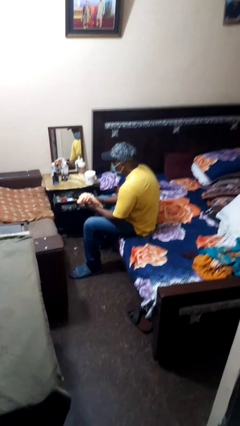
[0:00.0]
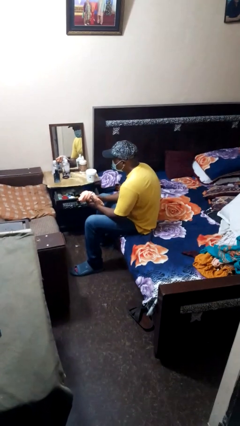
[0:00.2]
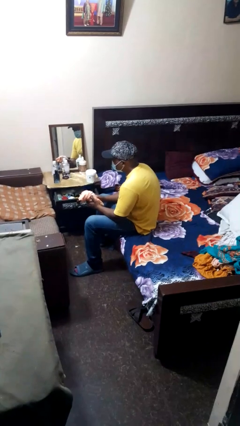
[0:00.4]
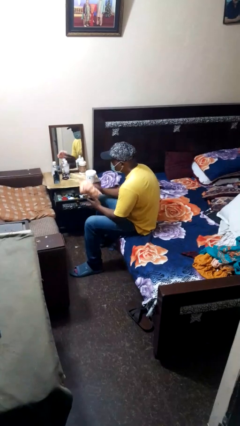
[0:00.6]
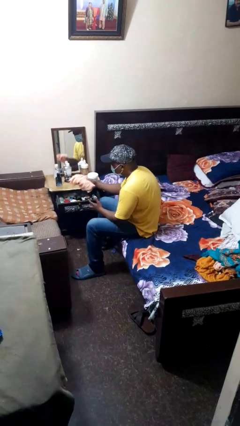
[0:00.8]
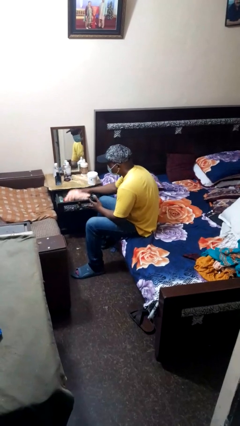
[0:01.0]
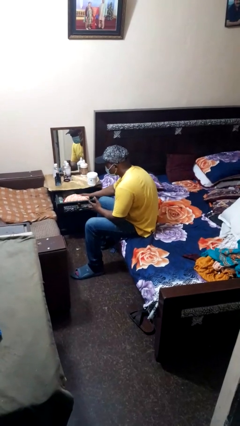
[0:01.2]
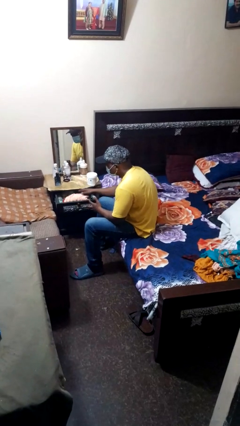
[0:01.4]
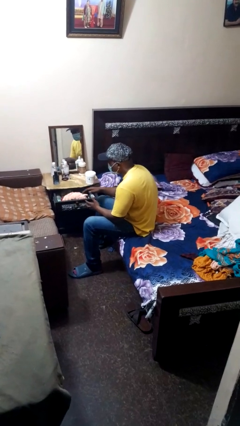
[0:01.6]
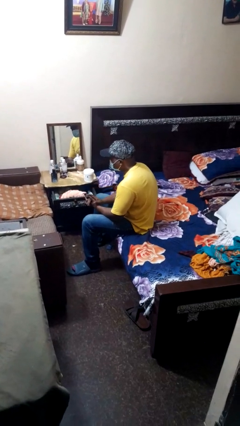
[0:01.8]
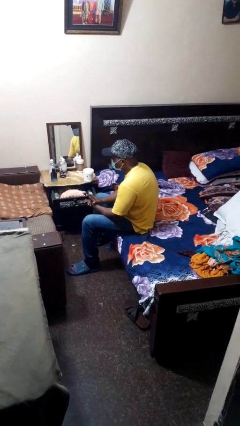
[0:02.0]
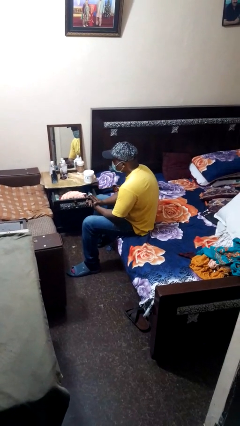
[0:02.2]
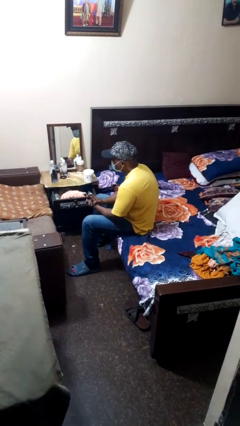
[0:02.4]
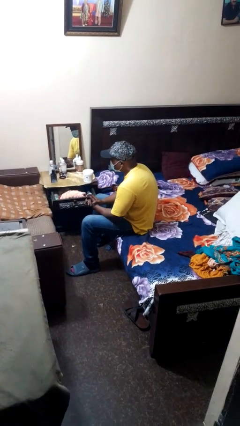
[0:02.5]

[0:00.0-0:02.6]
person puts clothes into dresser

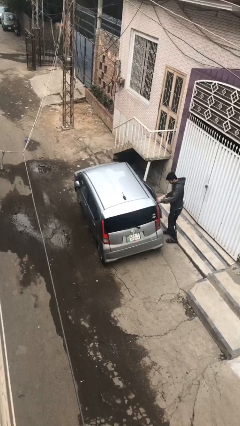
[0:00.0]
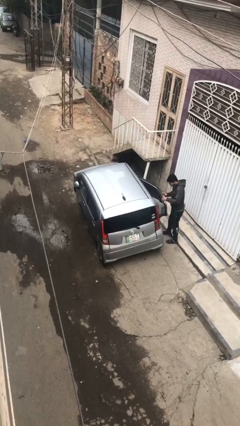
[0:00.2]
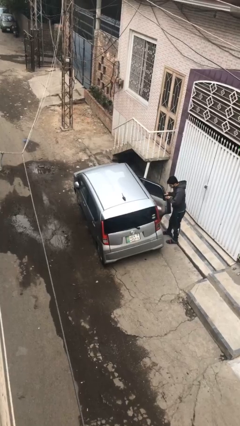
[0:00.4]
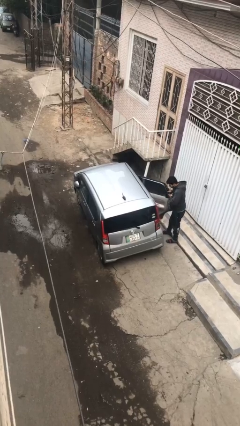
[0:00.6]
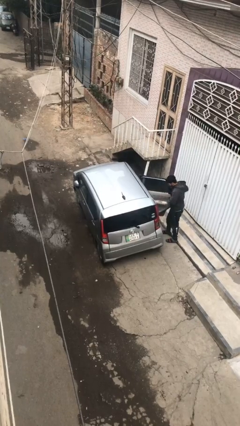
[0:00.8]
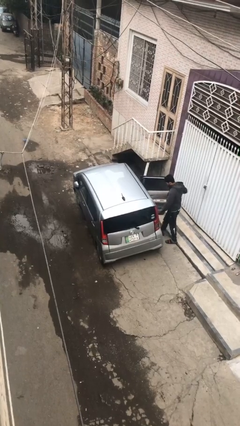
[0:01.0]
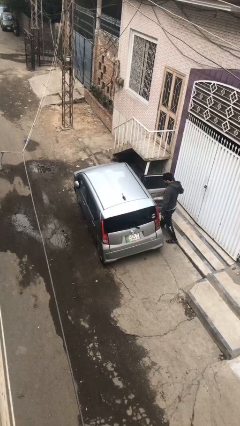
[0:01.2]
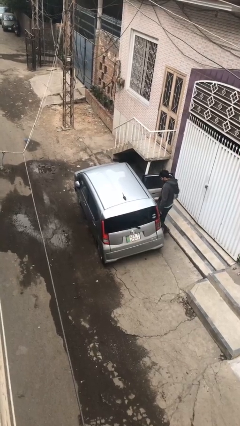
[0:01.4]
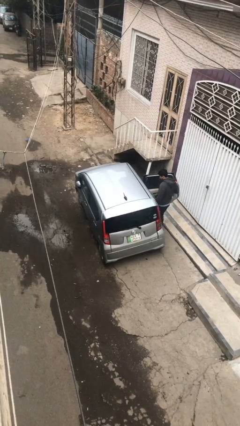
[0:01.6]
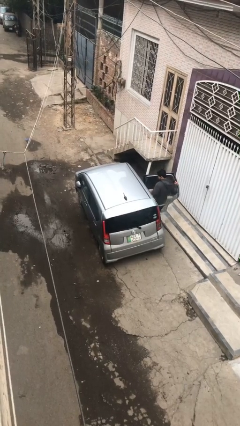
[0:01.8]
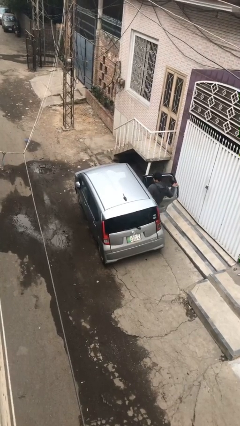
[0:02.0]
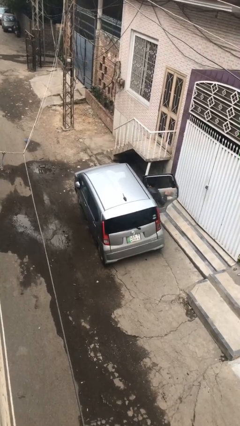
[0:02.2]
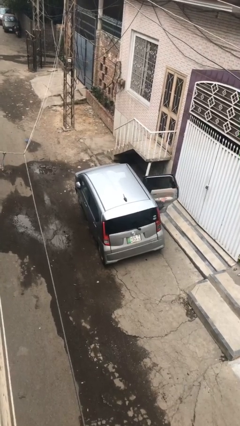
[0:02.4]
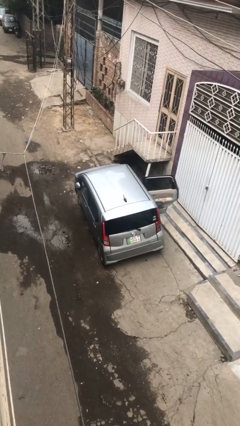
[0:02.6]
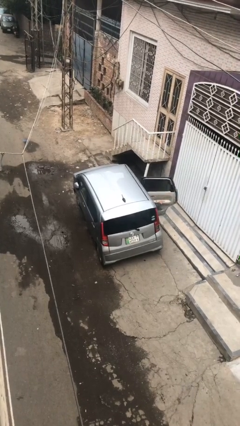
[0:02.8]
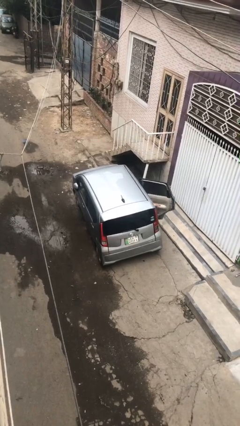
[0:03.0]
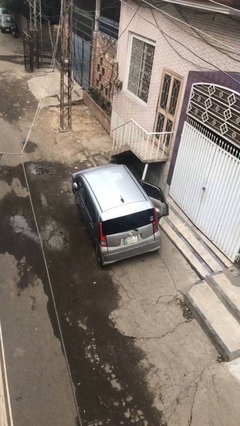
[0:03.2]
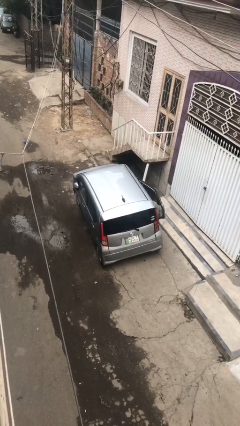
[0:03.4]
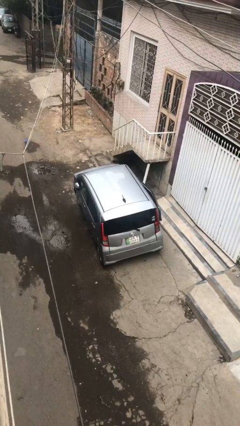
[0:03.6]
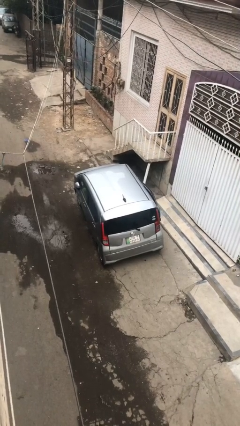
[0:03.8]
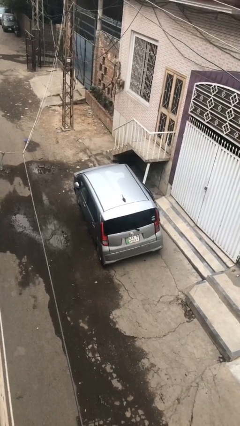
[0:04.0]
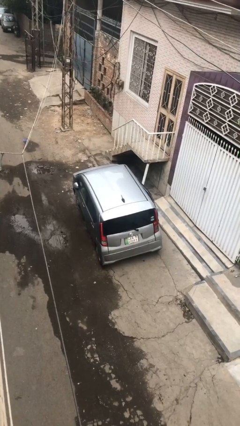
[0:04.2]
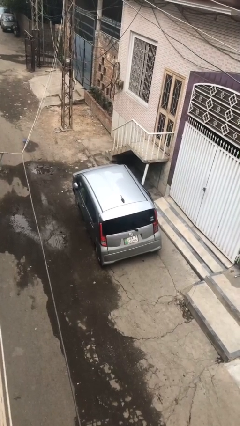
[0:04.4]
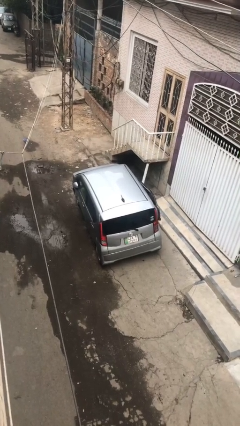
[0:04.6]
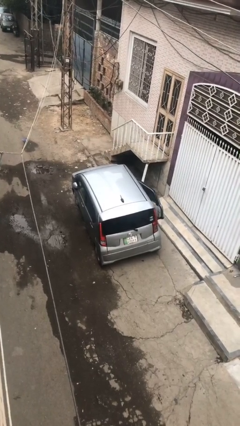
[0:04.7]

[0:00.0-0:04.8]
car picks up person

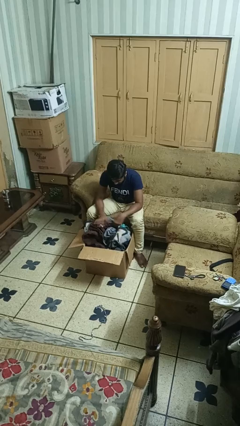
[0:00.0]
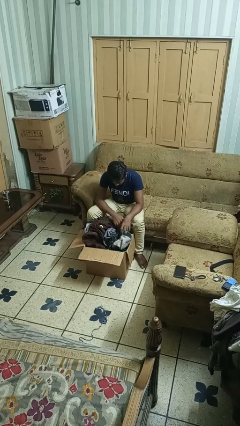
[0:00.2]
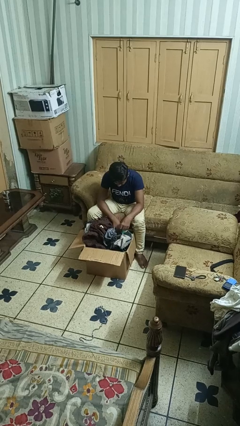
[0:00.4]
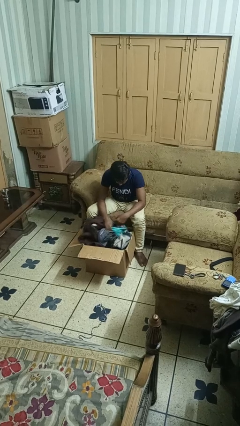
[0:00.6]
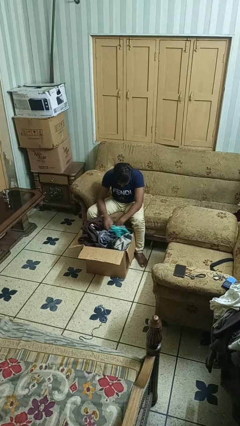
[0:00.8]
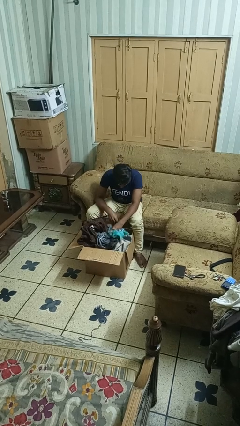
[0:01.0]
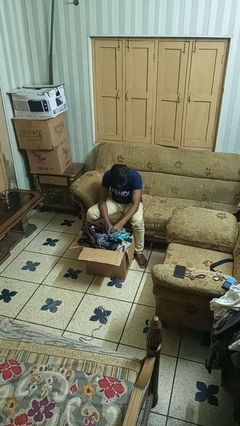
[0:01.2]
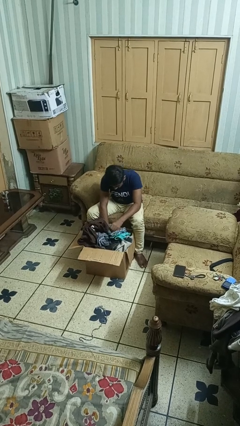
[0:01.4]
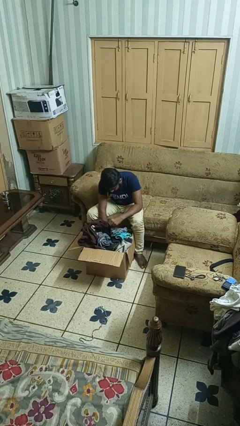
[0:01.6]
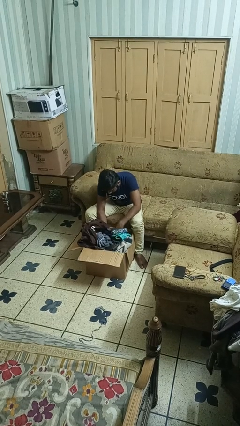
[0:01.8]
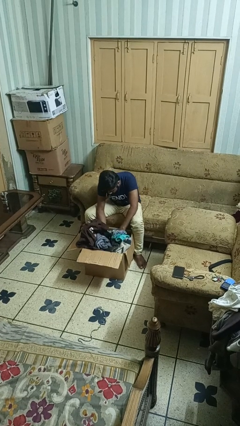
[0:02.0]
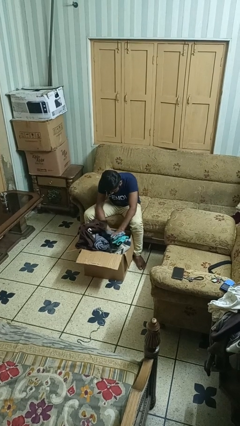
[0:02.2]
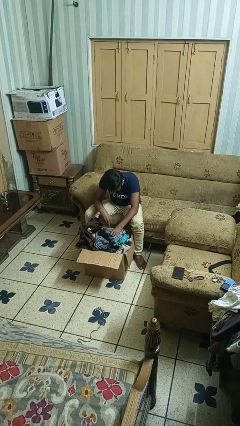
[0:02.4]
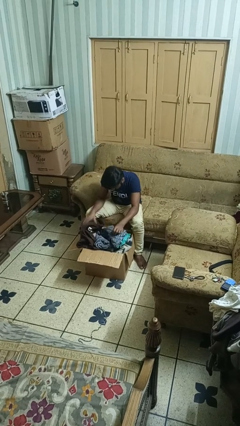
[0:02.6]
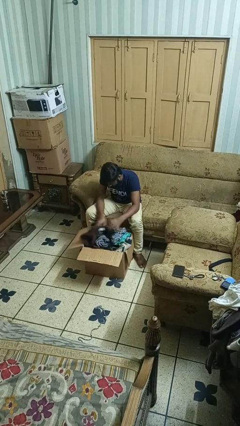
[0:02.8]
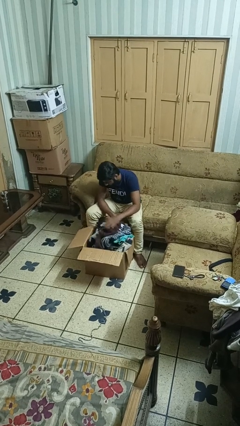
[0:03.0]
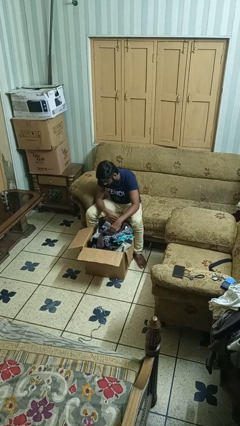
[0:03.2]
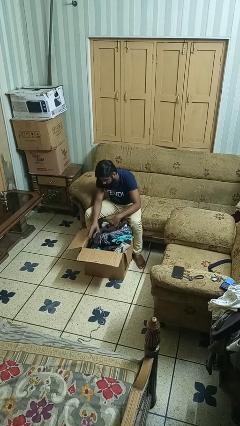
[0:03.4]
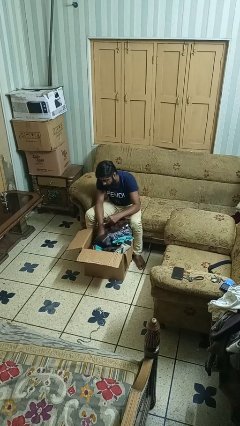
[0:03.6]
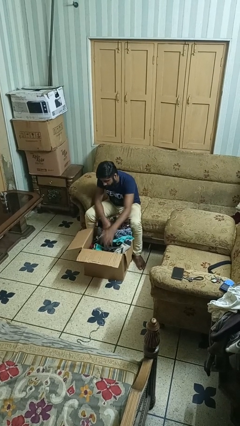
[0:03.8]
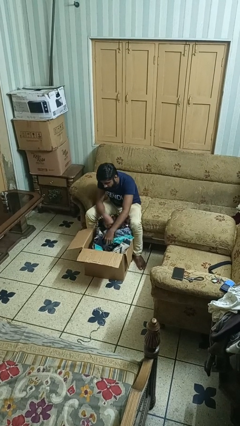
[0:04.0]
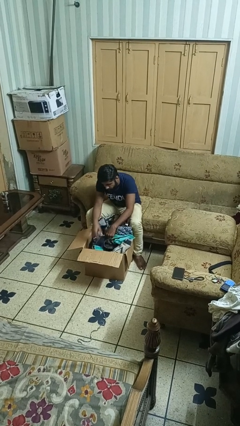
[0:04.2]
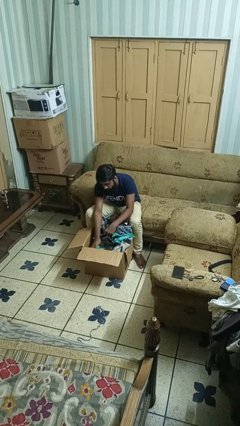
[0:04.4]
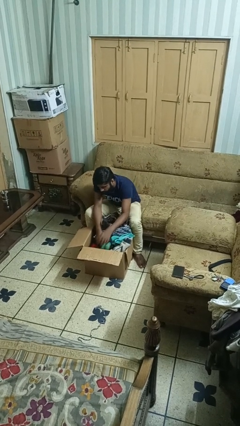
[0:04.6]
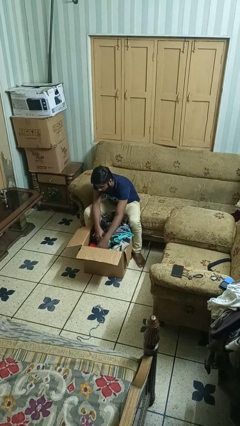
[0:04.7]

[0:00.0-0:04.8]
person searches in box

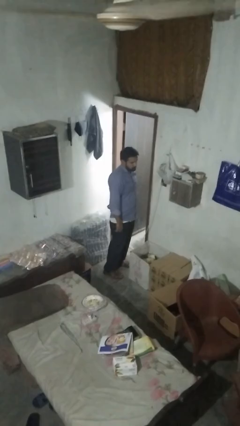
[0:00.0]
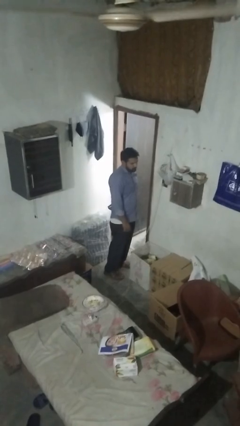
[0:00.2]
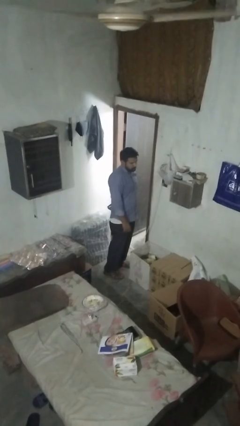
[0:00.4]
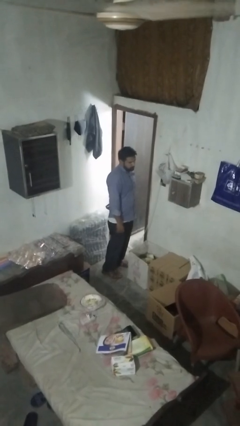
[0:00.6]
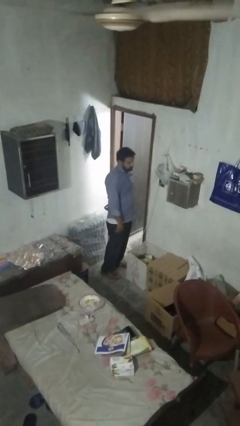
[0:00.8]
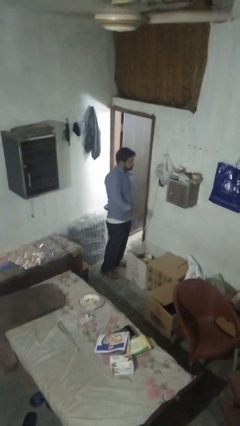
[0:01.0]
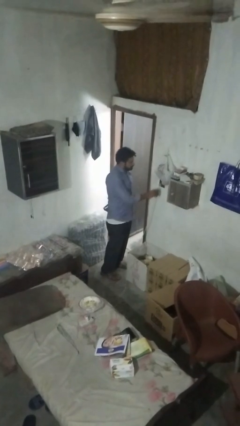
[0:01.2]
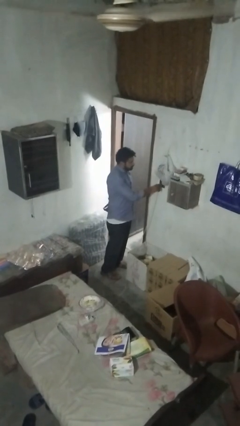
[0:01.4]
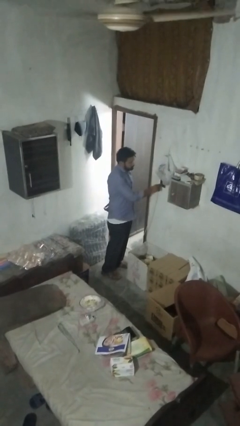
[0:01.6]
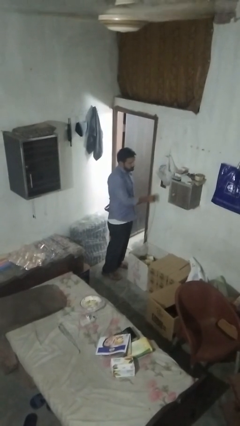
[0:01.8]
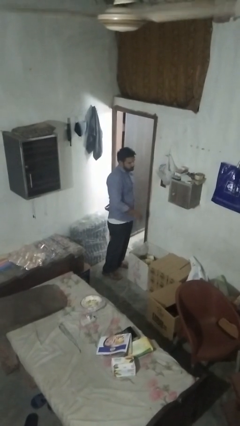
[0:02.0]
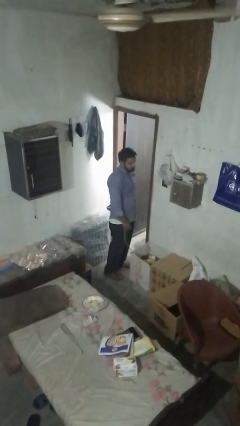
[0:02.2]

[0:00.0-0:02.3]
person unplugs from electrical socket

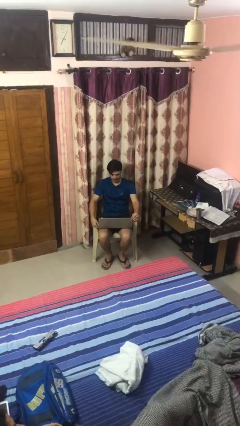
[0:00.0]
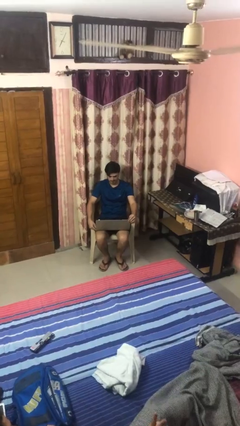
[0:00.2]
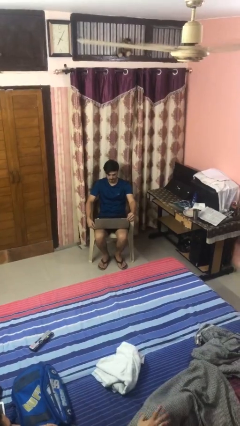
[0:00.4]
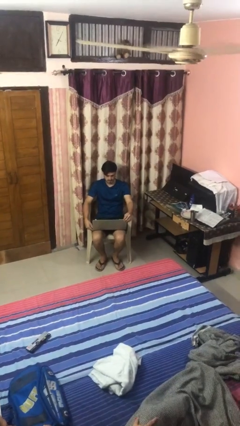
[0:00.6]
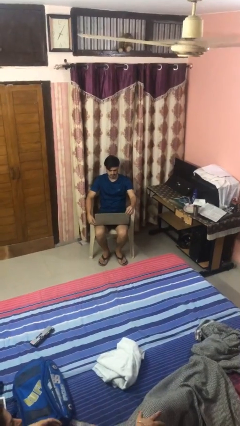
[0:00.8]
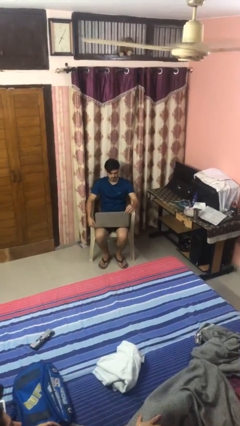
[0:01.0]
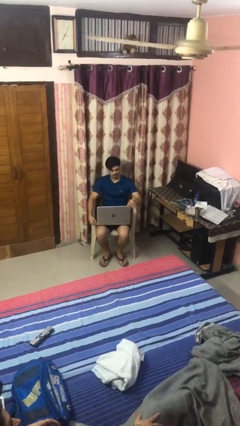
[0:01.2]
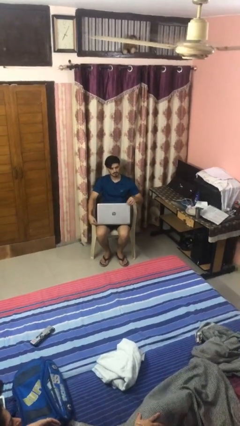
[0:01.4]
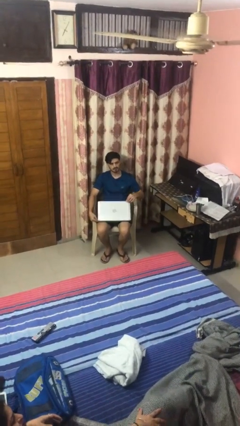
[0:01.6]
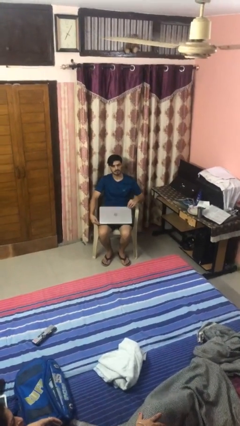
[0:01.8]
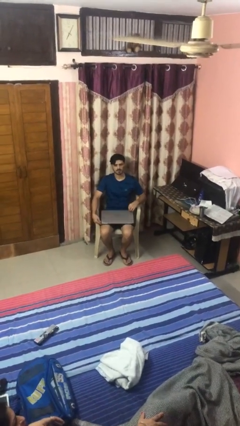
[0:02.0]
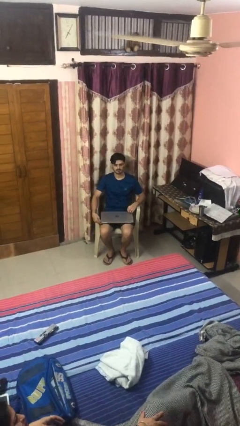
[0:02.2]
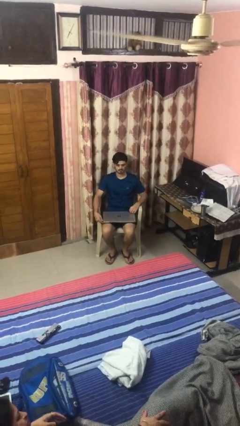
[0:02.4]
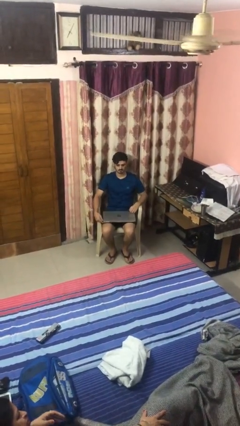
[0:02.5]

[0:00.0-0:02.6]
person closes laptop

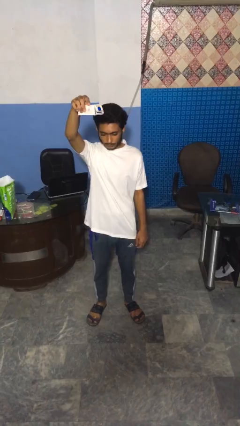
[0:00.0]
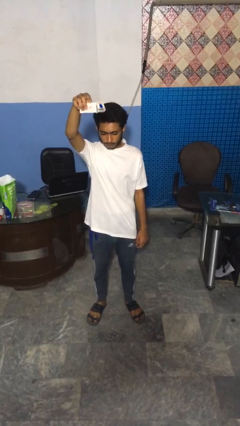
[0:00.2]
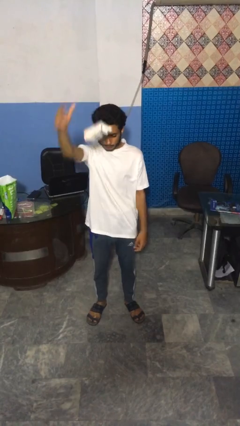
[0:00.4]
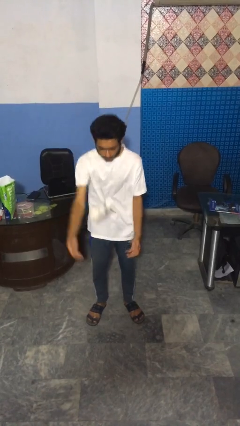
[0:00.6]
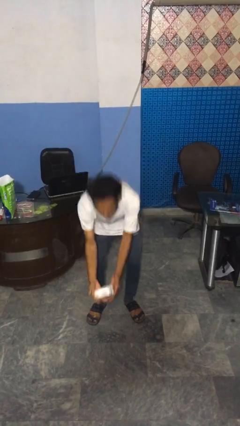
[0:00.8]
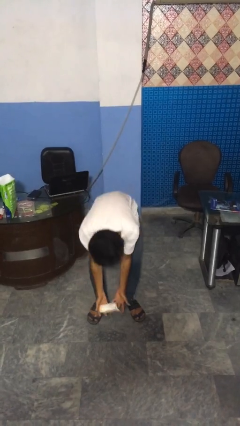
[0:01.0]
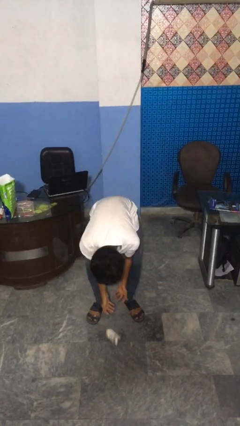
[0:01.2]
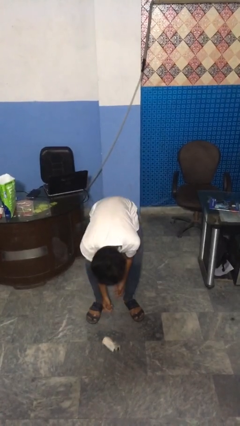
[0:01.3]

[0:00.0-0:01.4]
person drops object
